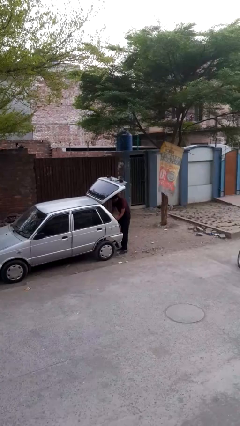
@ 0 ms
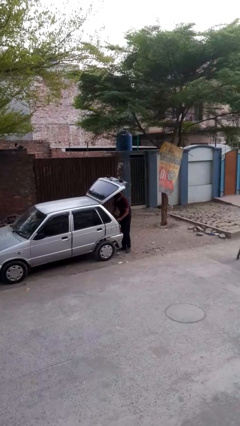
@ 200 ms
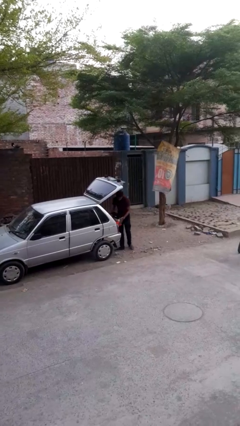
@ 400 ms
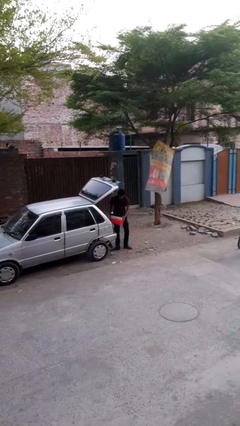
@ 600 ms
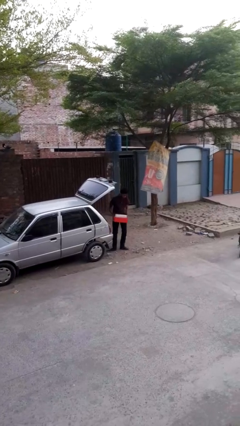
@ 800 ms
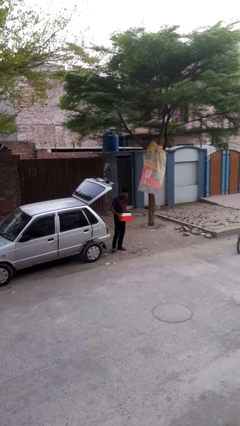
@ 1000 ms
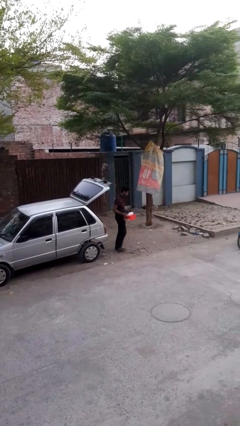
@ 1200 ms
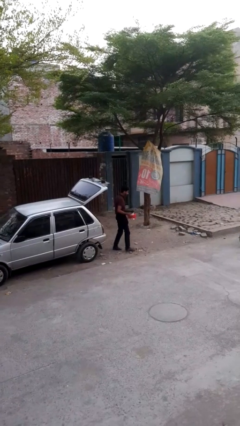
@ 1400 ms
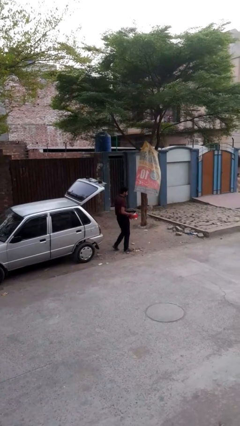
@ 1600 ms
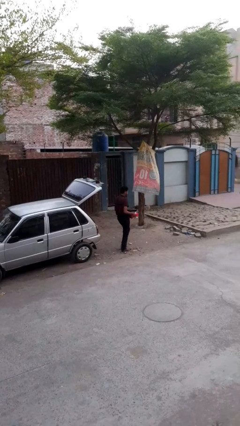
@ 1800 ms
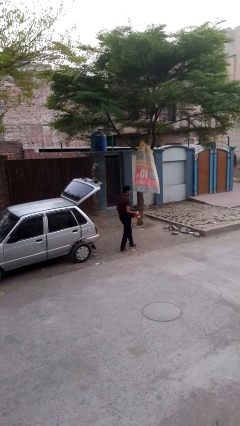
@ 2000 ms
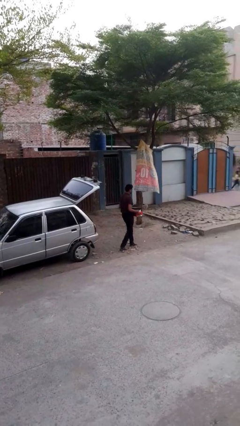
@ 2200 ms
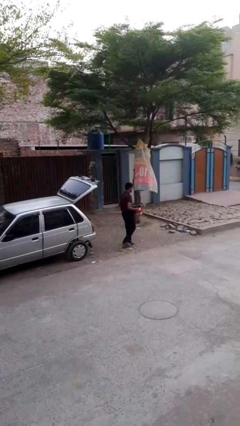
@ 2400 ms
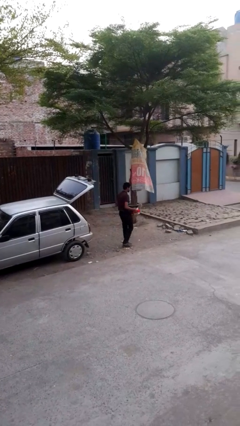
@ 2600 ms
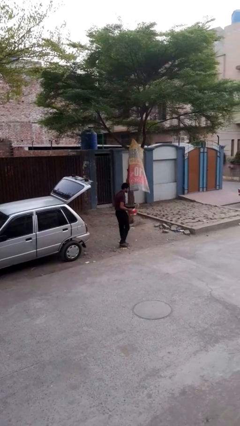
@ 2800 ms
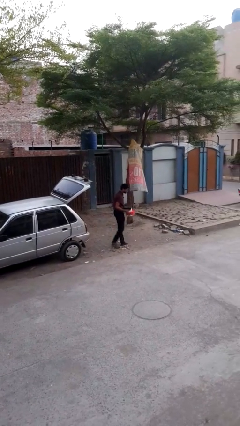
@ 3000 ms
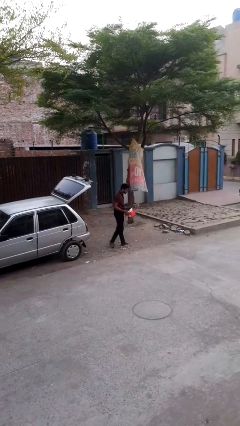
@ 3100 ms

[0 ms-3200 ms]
person unloads car

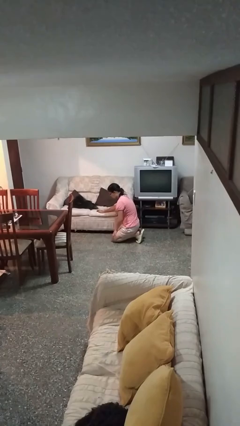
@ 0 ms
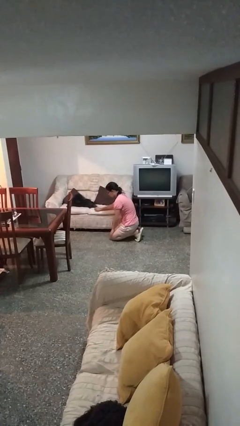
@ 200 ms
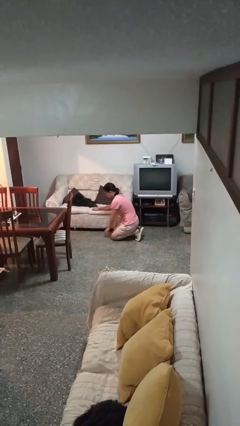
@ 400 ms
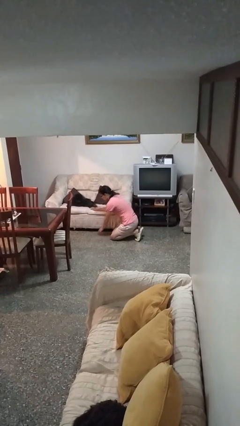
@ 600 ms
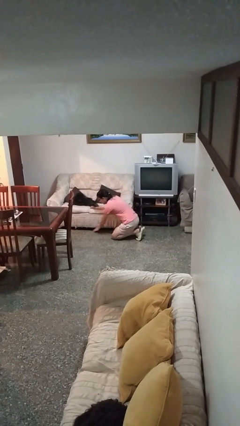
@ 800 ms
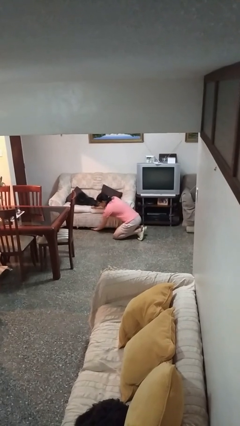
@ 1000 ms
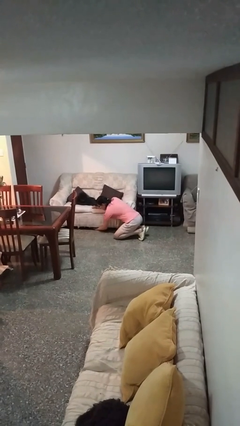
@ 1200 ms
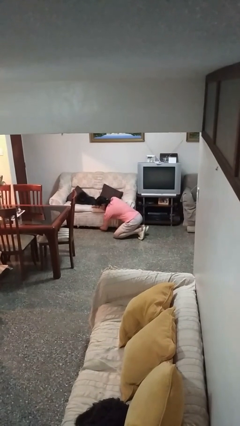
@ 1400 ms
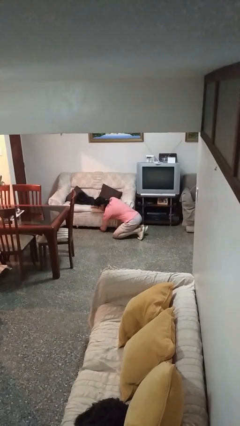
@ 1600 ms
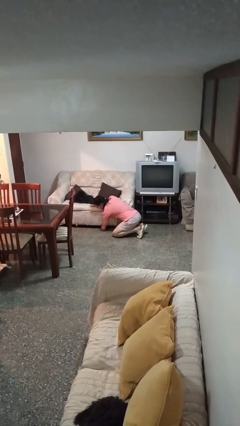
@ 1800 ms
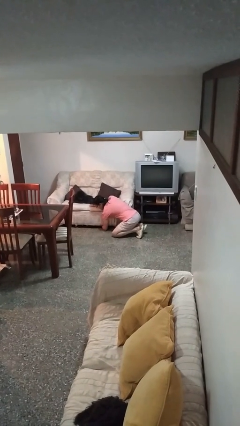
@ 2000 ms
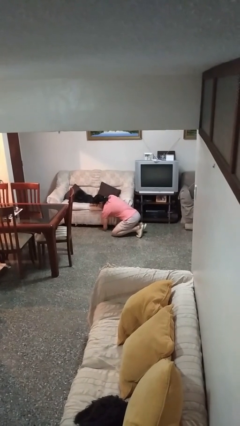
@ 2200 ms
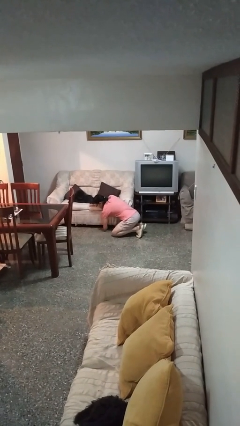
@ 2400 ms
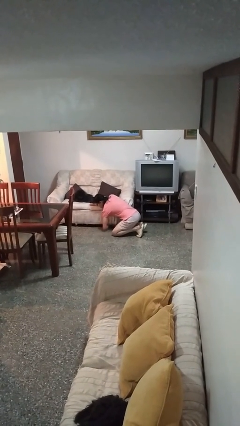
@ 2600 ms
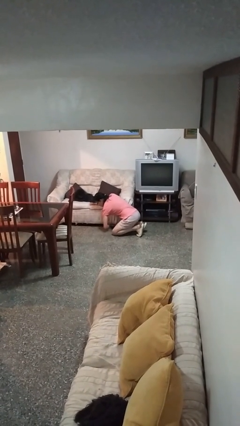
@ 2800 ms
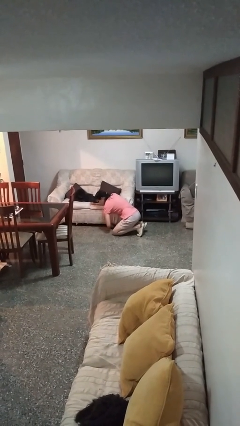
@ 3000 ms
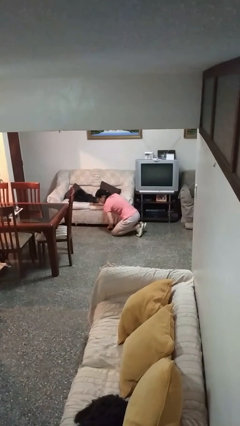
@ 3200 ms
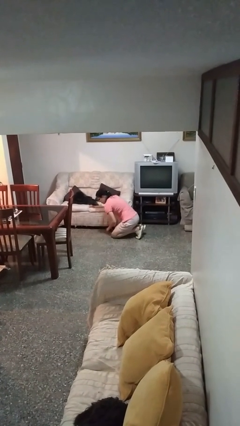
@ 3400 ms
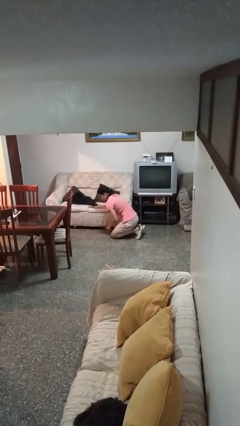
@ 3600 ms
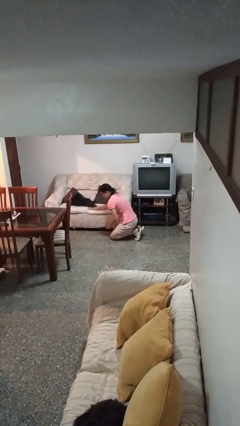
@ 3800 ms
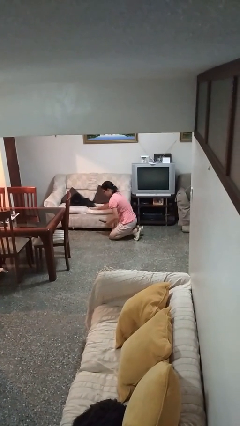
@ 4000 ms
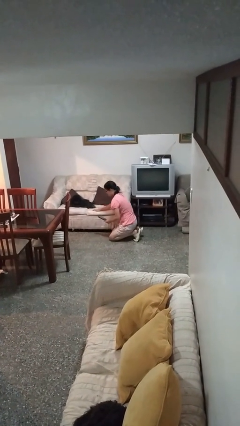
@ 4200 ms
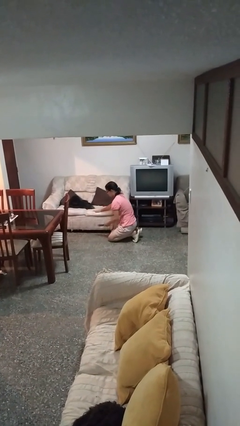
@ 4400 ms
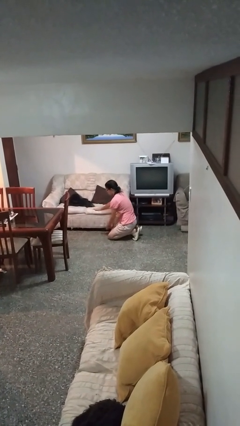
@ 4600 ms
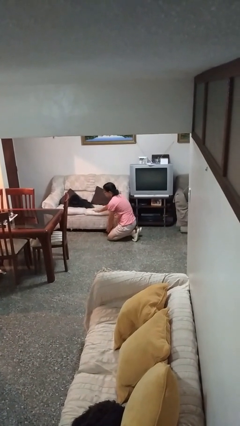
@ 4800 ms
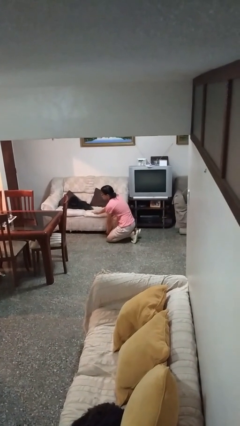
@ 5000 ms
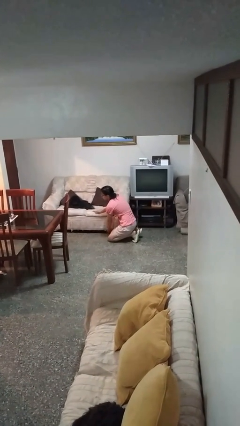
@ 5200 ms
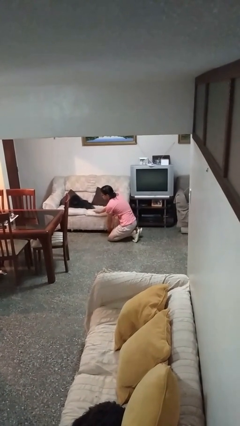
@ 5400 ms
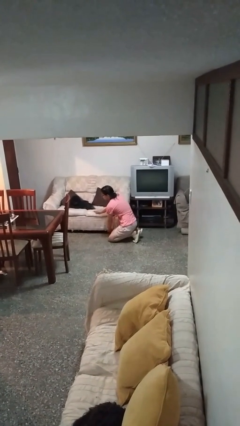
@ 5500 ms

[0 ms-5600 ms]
person searches under couch

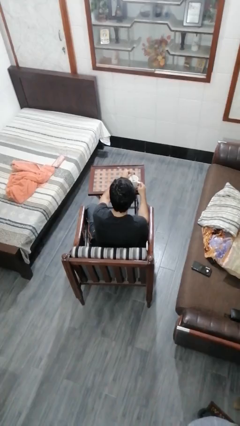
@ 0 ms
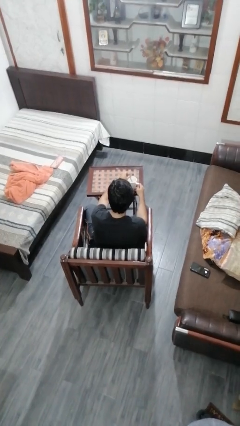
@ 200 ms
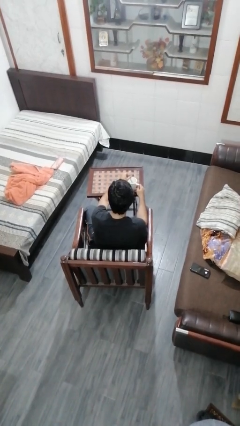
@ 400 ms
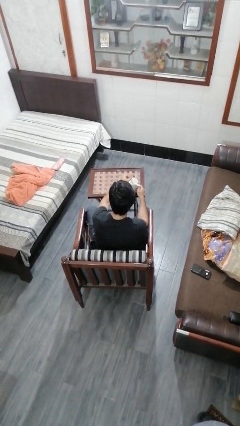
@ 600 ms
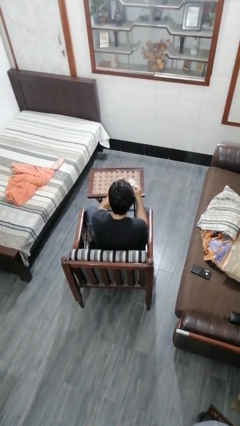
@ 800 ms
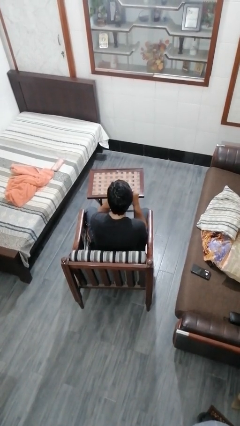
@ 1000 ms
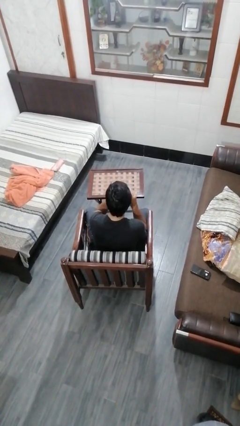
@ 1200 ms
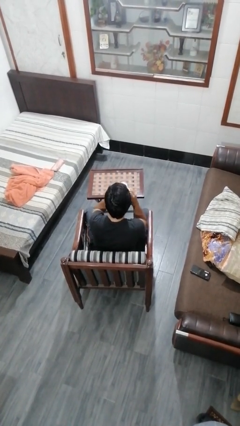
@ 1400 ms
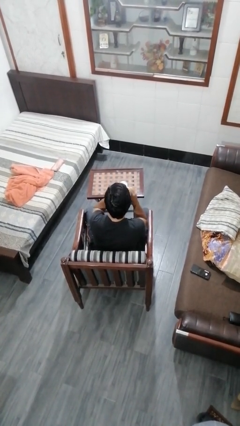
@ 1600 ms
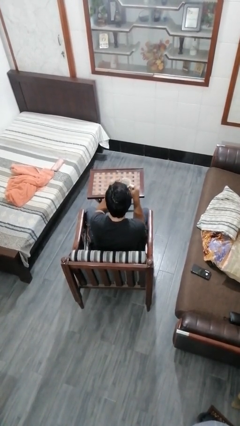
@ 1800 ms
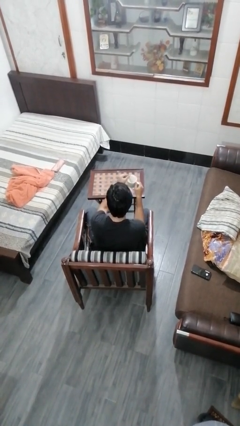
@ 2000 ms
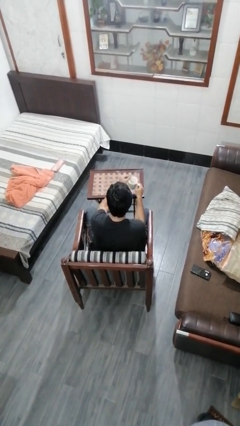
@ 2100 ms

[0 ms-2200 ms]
person drinks from mug

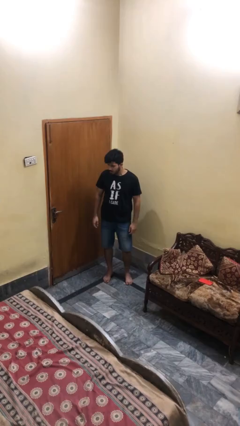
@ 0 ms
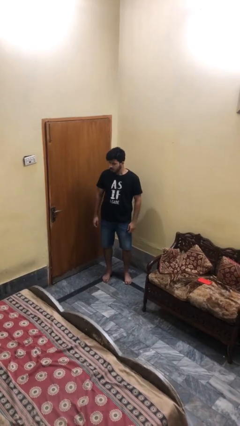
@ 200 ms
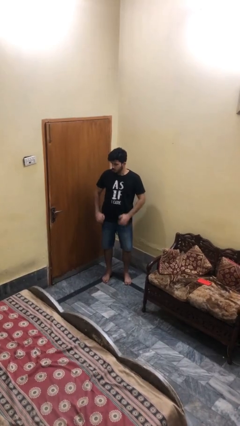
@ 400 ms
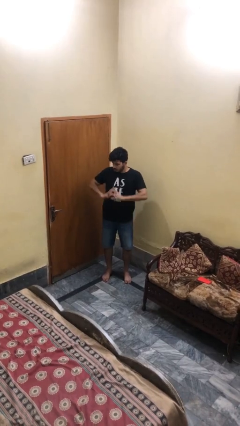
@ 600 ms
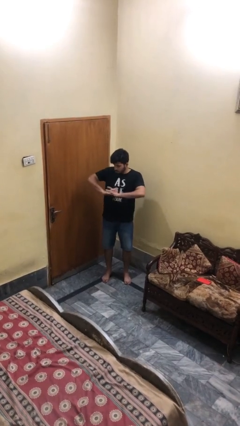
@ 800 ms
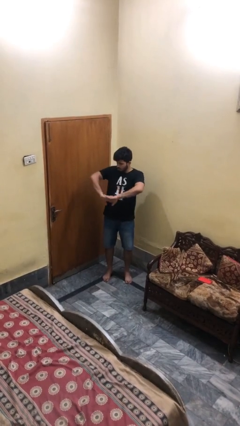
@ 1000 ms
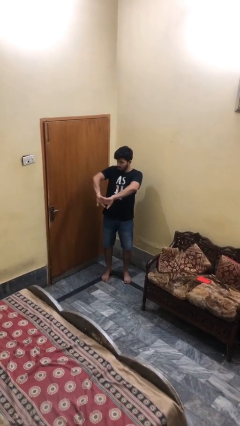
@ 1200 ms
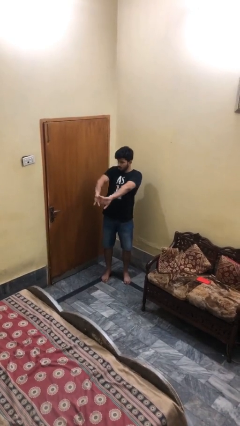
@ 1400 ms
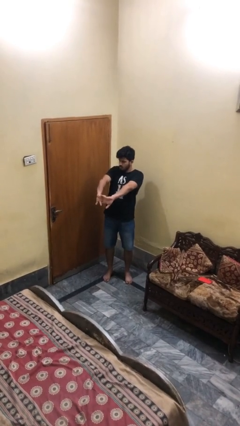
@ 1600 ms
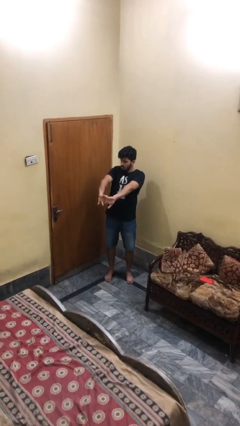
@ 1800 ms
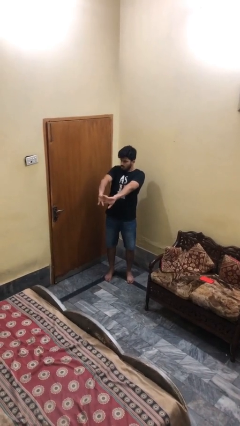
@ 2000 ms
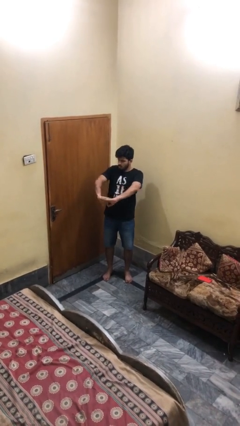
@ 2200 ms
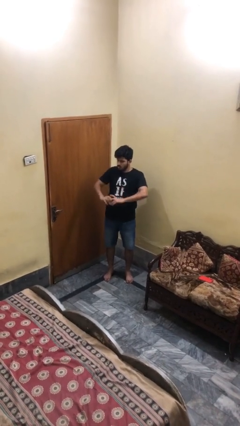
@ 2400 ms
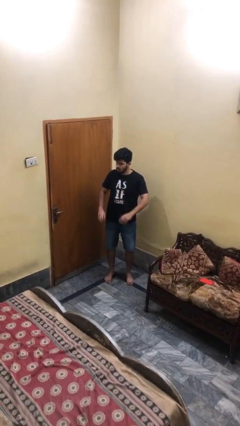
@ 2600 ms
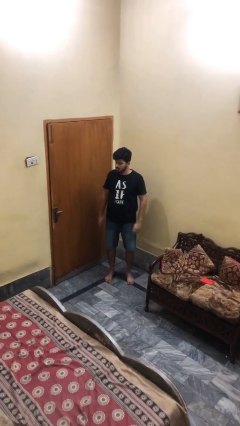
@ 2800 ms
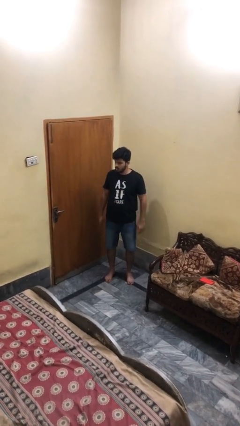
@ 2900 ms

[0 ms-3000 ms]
person cracks knuckles

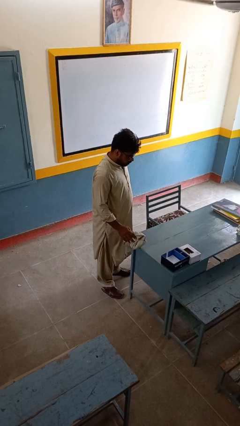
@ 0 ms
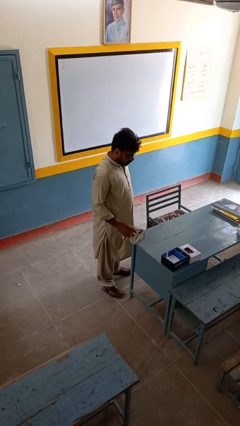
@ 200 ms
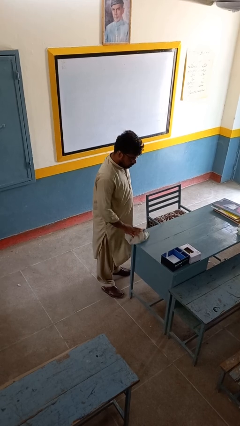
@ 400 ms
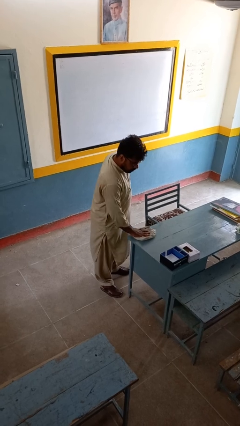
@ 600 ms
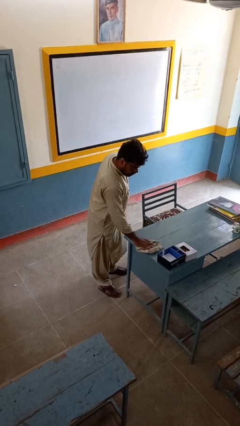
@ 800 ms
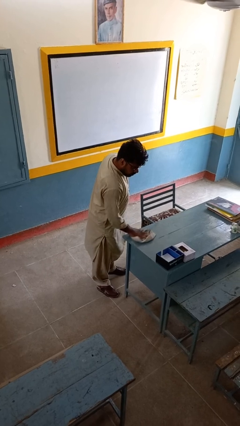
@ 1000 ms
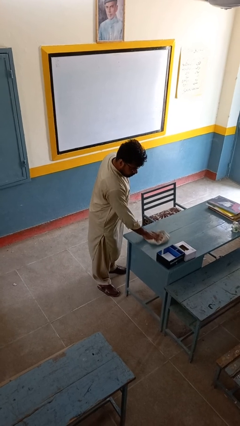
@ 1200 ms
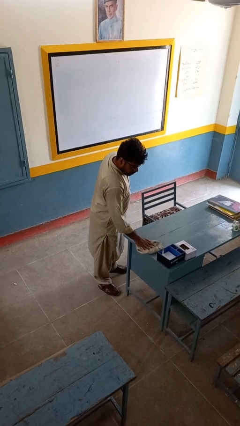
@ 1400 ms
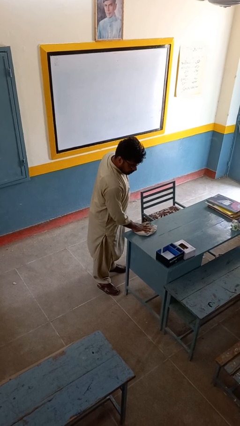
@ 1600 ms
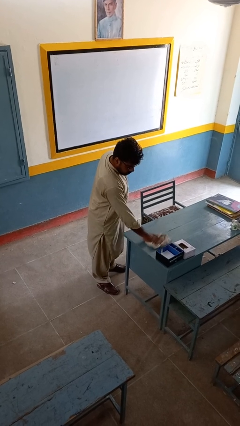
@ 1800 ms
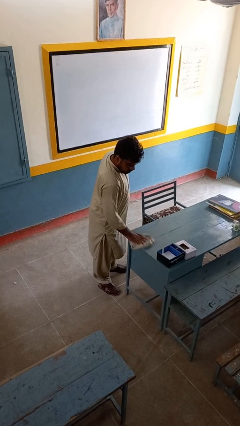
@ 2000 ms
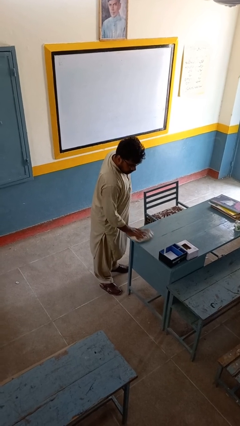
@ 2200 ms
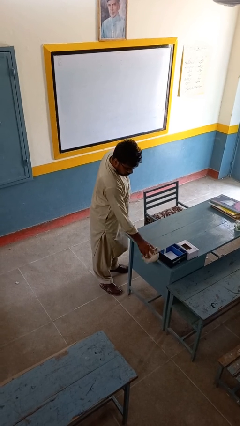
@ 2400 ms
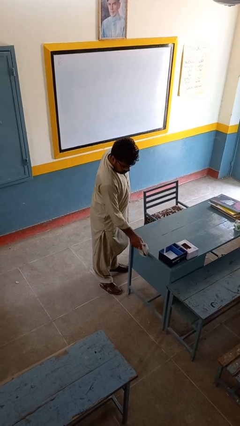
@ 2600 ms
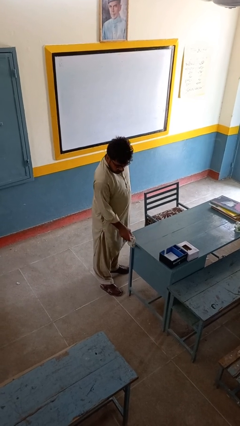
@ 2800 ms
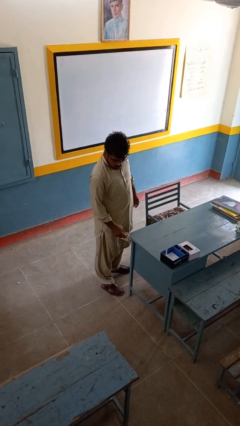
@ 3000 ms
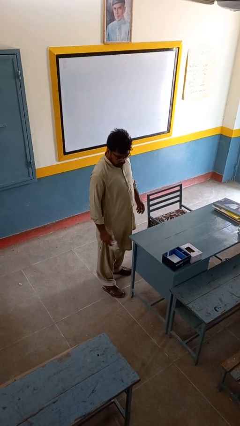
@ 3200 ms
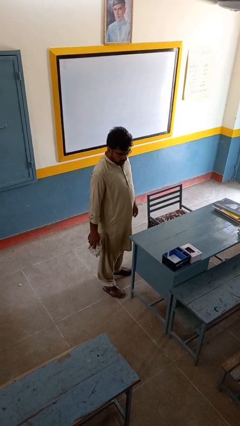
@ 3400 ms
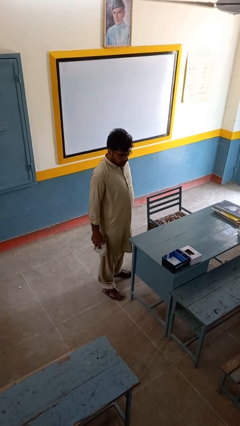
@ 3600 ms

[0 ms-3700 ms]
person cleans table with rag
